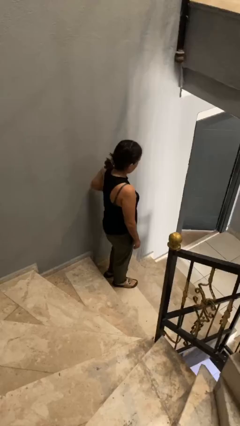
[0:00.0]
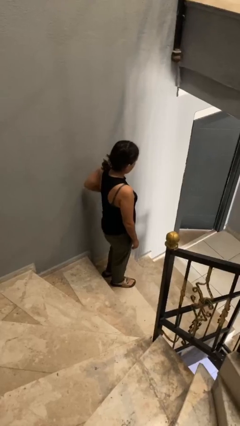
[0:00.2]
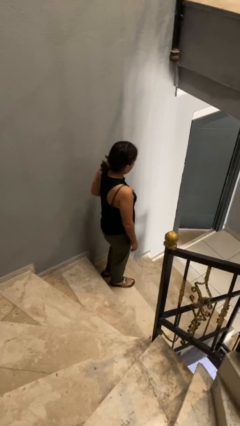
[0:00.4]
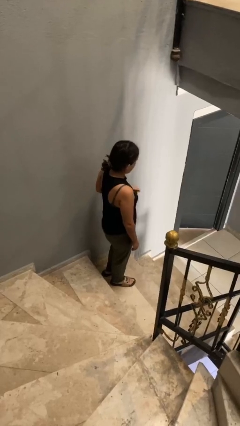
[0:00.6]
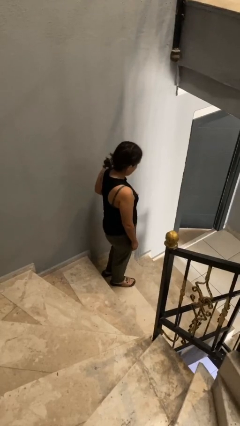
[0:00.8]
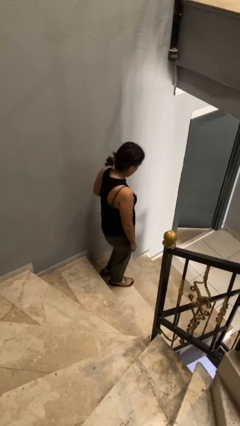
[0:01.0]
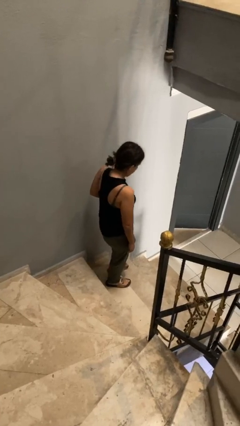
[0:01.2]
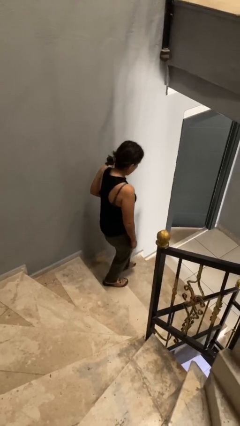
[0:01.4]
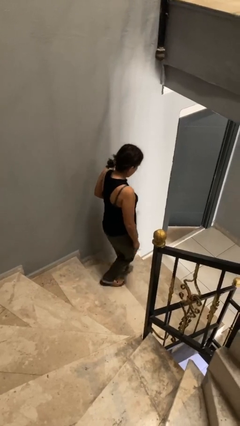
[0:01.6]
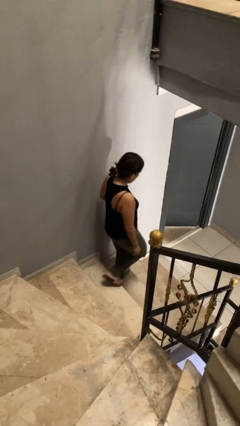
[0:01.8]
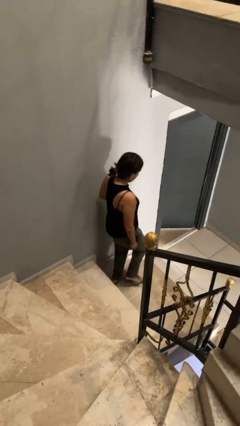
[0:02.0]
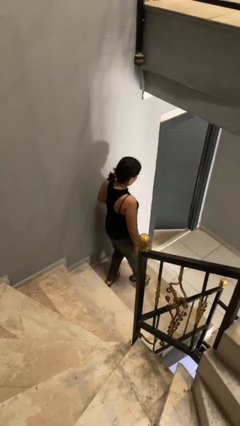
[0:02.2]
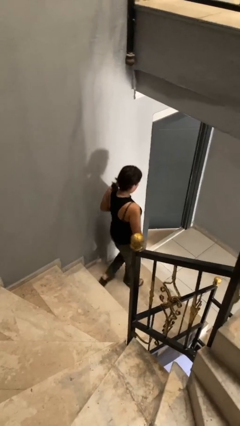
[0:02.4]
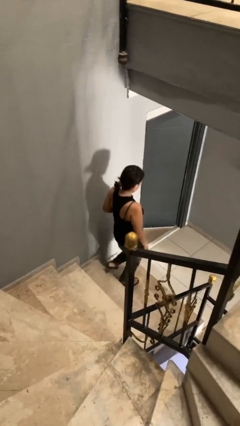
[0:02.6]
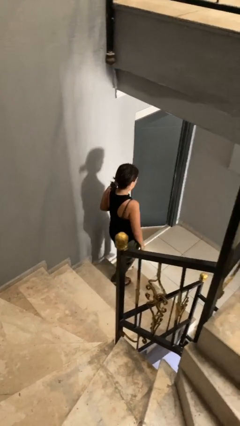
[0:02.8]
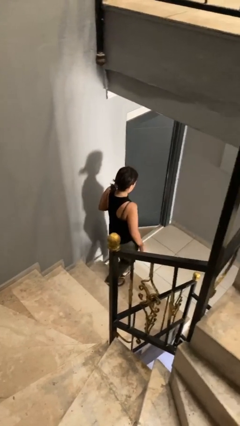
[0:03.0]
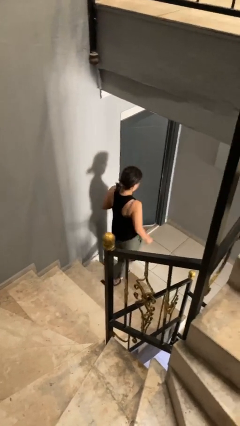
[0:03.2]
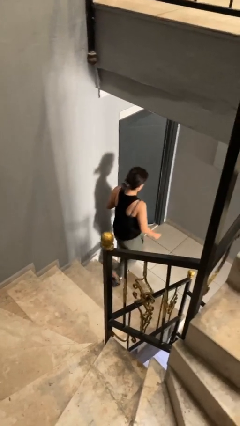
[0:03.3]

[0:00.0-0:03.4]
person climbs down stairs

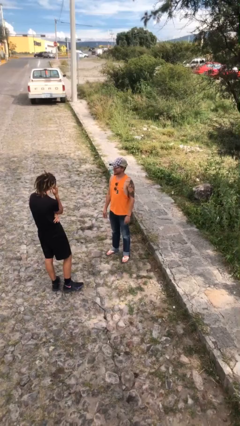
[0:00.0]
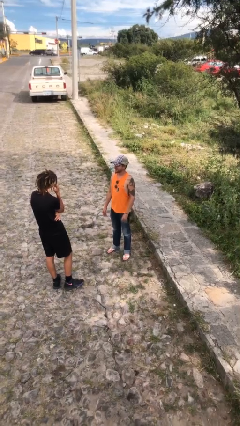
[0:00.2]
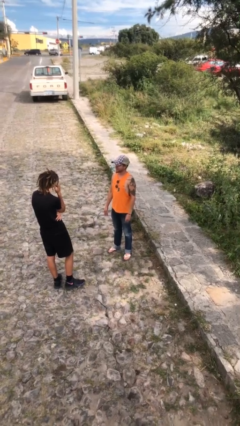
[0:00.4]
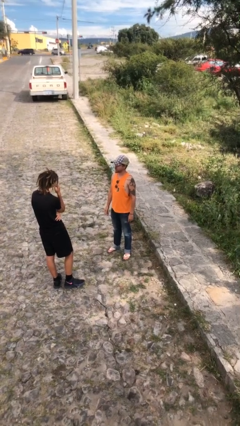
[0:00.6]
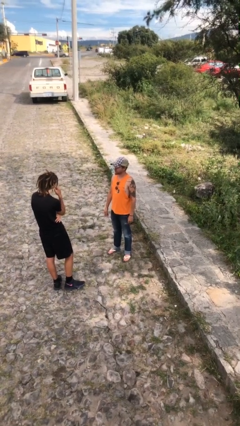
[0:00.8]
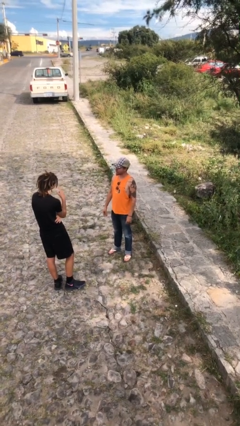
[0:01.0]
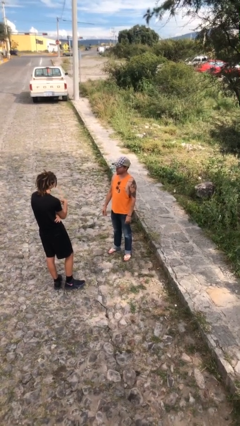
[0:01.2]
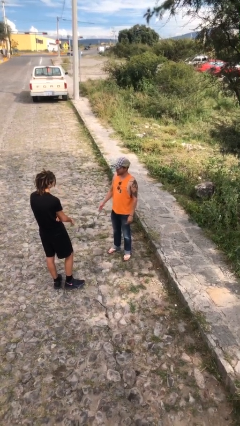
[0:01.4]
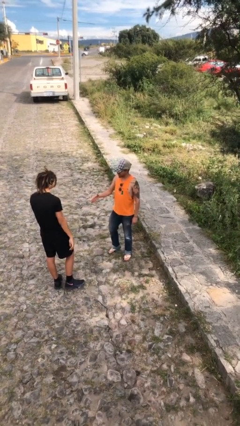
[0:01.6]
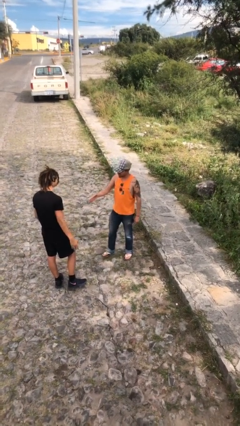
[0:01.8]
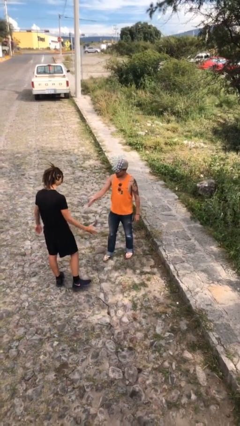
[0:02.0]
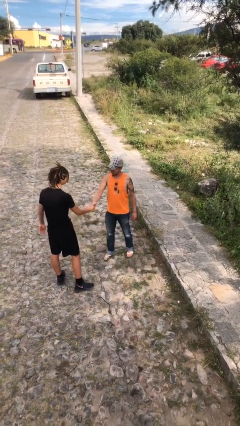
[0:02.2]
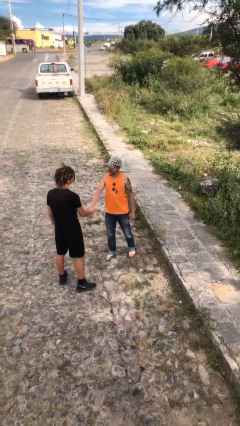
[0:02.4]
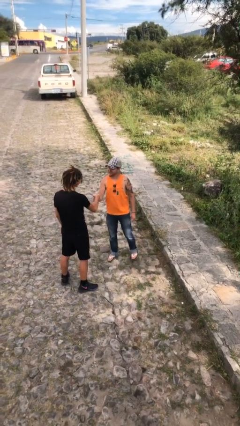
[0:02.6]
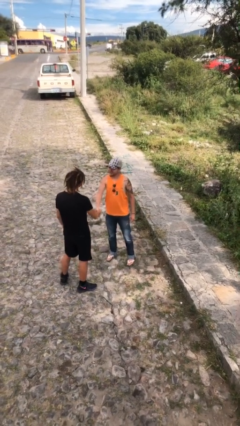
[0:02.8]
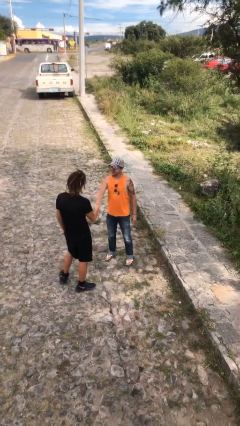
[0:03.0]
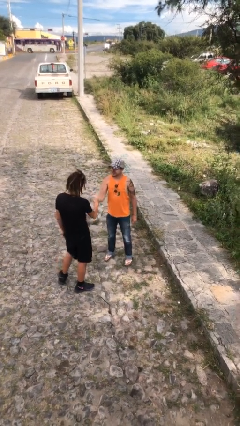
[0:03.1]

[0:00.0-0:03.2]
person shakes hand

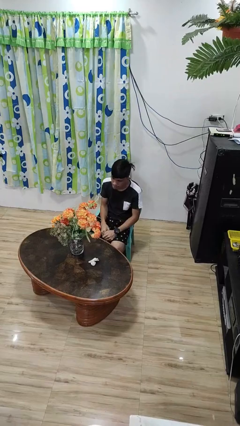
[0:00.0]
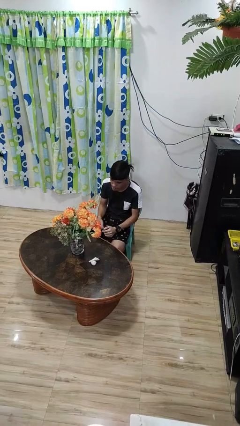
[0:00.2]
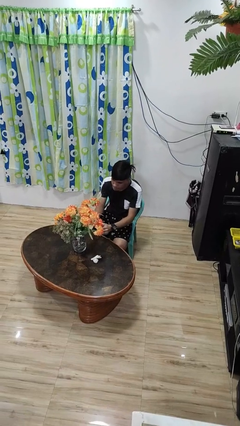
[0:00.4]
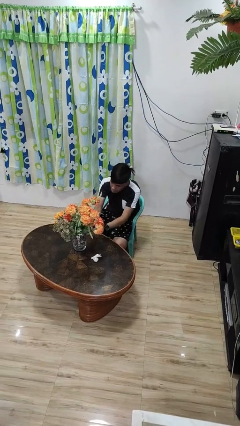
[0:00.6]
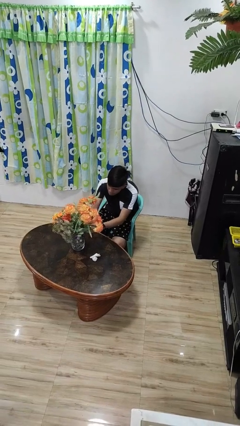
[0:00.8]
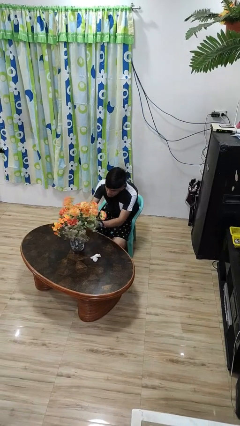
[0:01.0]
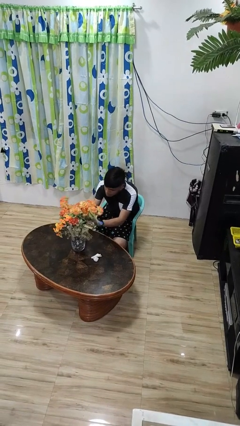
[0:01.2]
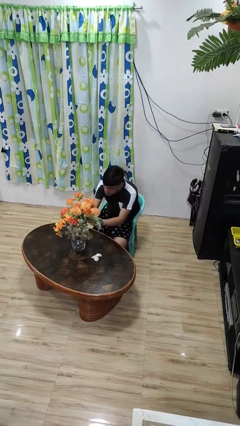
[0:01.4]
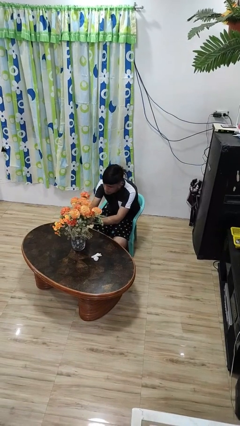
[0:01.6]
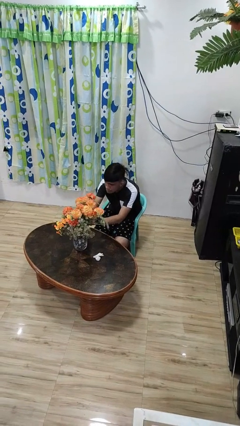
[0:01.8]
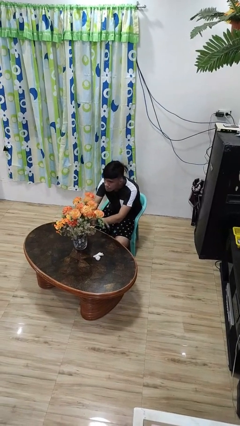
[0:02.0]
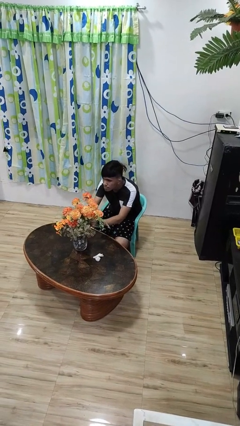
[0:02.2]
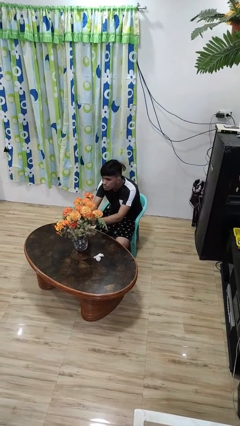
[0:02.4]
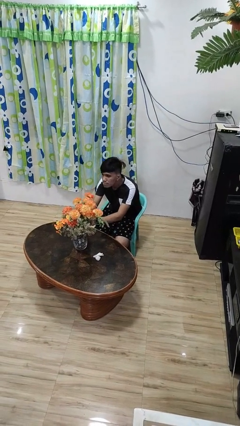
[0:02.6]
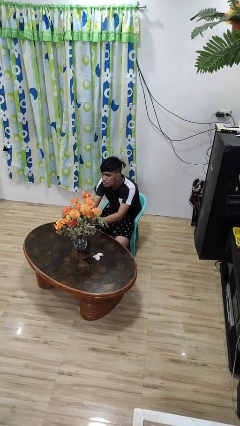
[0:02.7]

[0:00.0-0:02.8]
person arranges flowers in vase

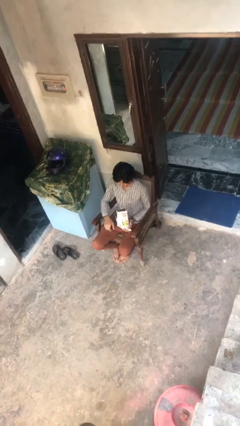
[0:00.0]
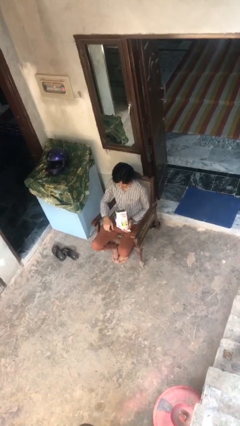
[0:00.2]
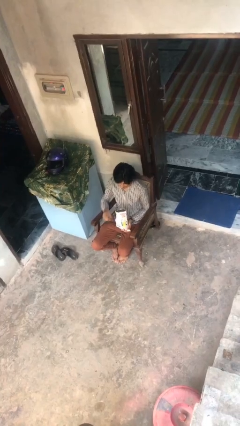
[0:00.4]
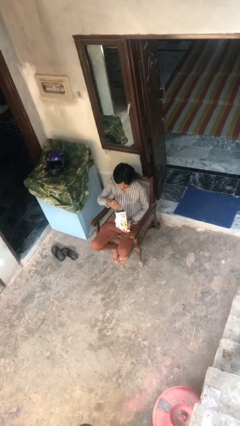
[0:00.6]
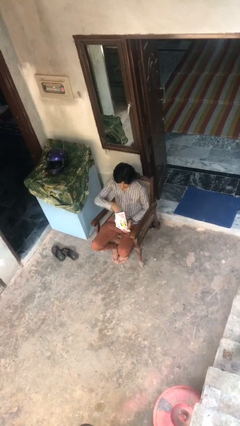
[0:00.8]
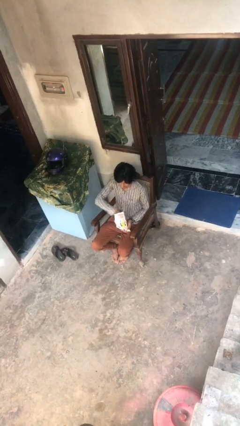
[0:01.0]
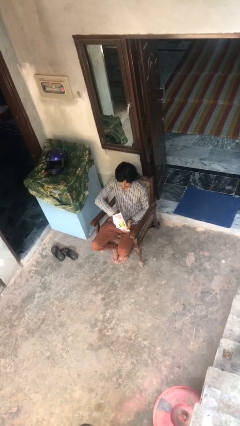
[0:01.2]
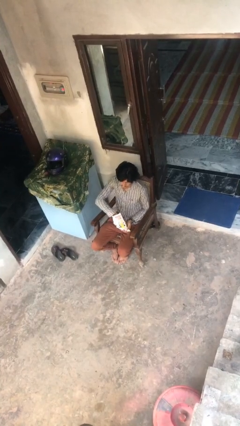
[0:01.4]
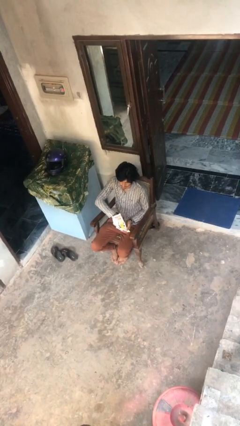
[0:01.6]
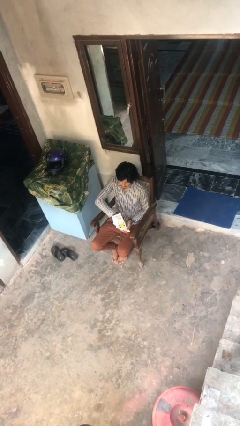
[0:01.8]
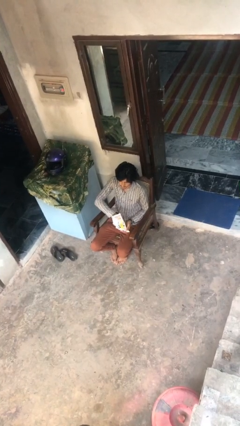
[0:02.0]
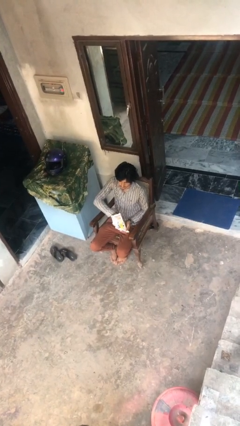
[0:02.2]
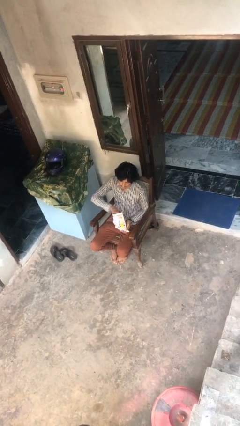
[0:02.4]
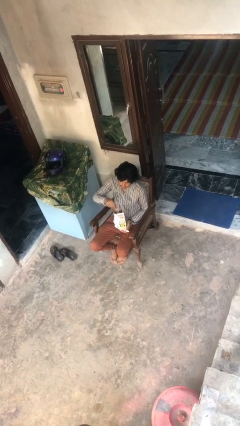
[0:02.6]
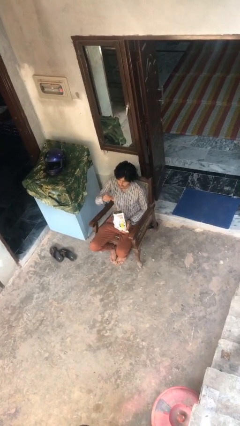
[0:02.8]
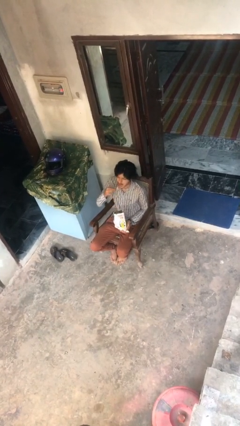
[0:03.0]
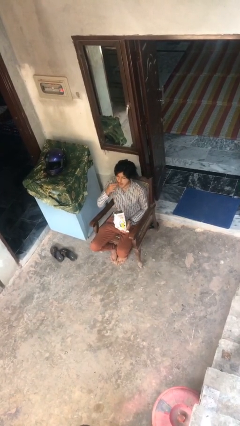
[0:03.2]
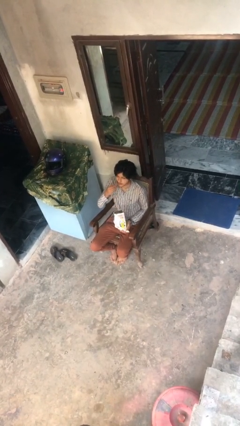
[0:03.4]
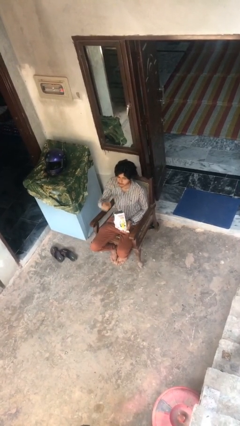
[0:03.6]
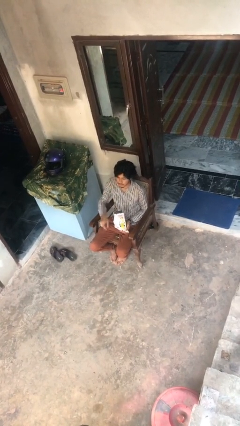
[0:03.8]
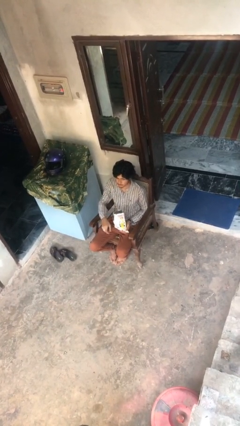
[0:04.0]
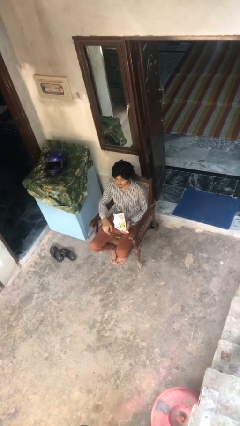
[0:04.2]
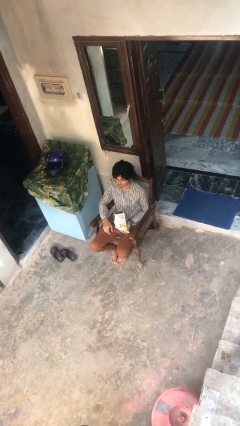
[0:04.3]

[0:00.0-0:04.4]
person eats snack from bag

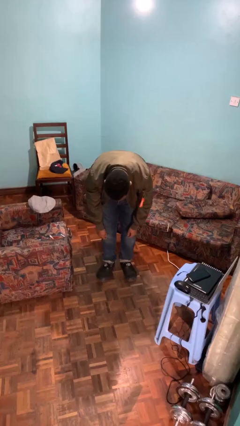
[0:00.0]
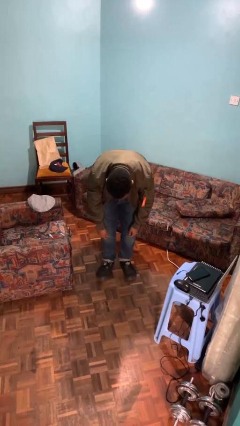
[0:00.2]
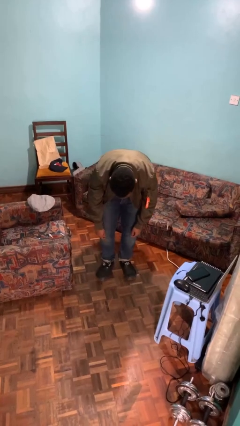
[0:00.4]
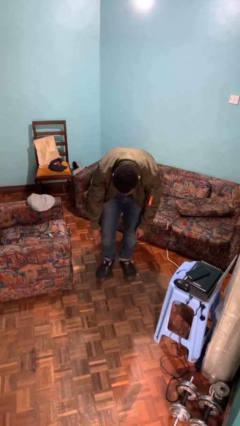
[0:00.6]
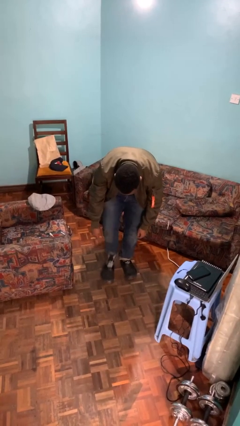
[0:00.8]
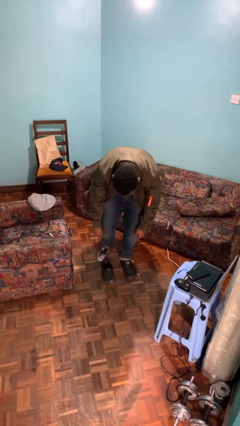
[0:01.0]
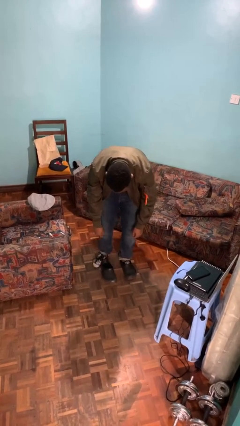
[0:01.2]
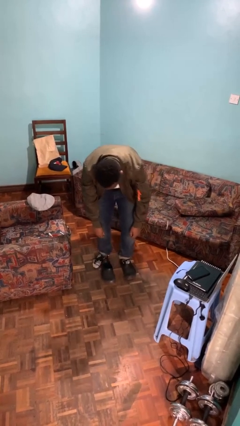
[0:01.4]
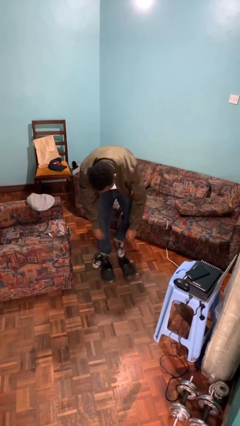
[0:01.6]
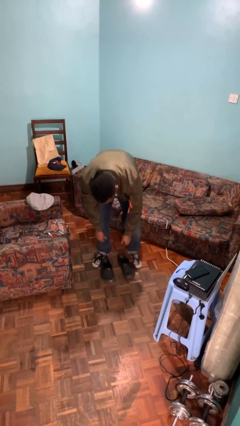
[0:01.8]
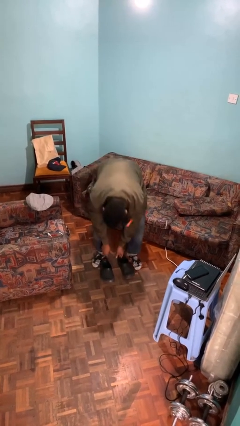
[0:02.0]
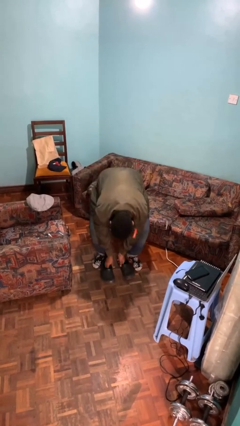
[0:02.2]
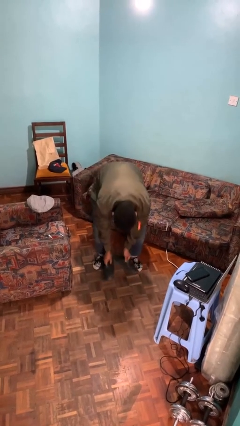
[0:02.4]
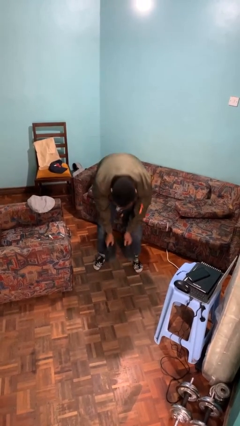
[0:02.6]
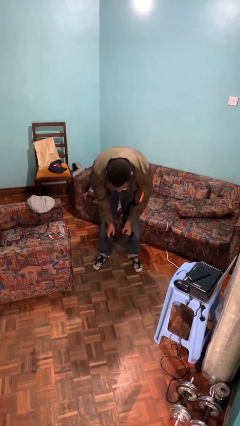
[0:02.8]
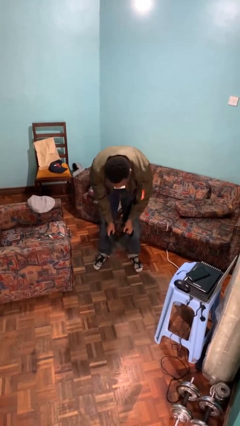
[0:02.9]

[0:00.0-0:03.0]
person takes off shoes

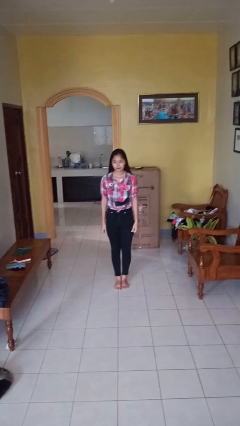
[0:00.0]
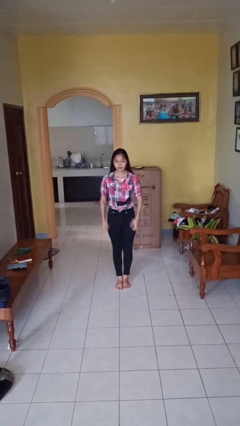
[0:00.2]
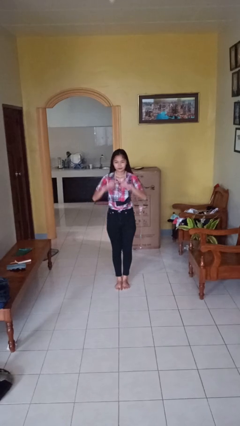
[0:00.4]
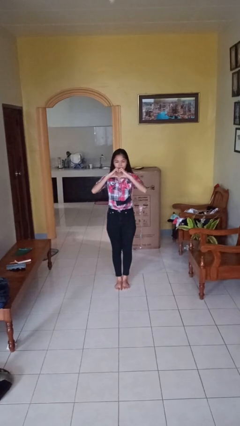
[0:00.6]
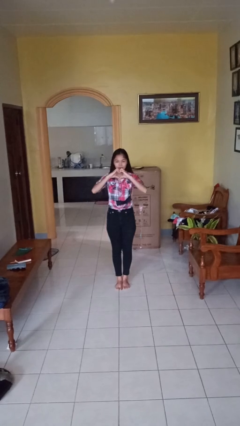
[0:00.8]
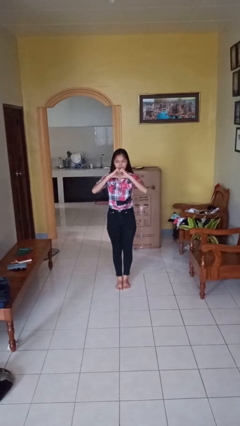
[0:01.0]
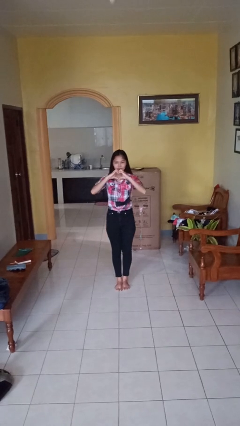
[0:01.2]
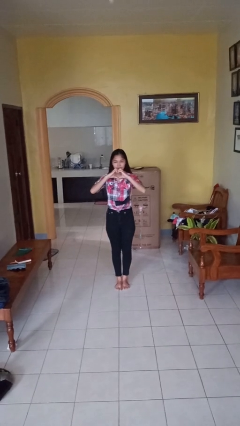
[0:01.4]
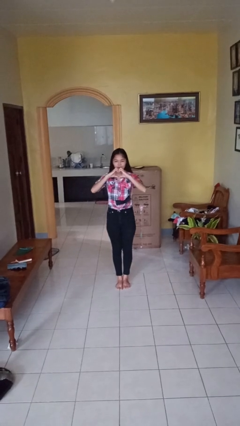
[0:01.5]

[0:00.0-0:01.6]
person gestures heart
